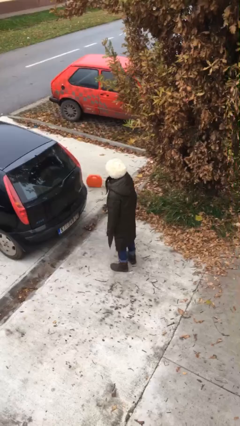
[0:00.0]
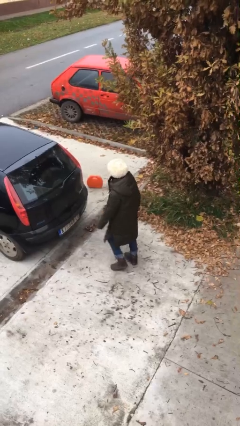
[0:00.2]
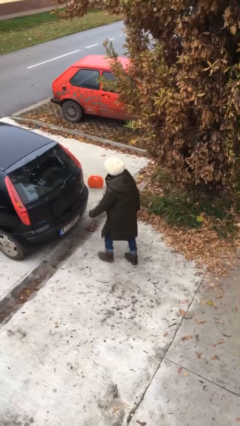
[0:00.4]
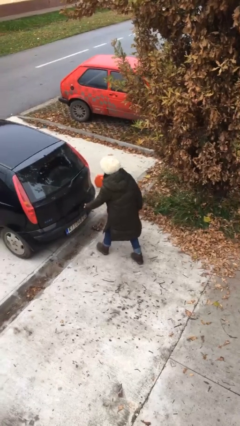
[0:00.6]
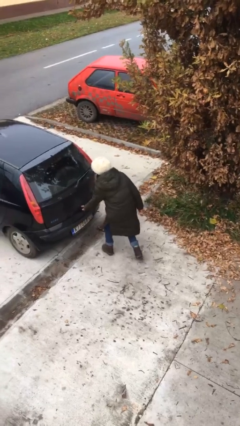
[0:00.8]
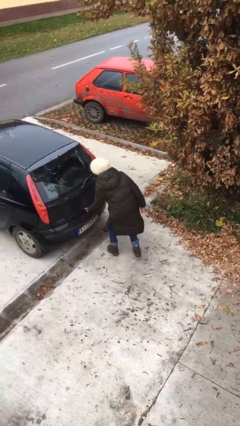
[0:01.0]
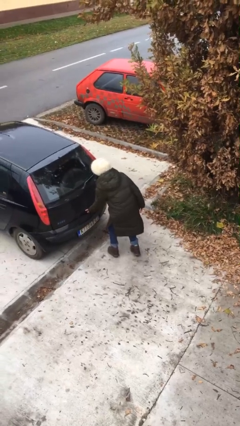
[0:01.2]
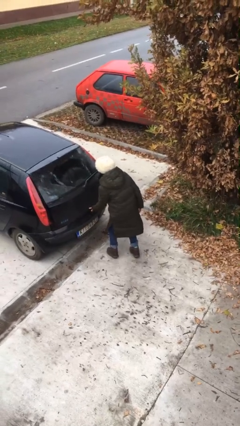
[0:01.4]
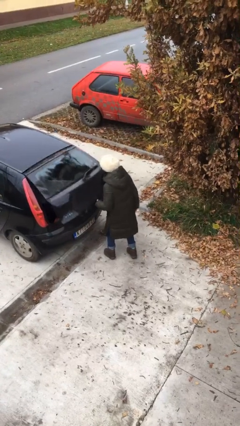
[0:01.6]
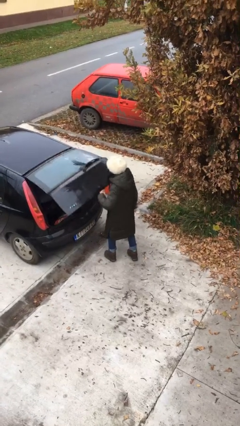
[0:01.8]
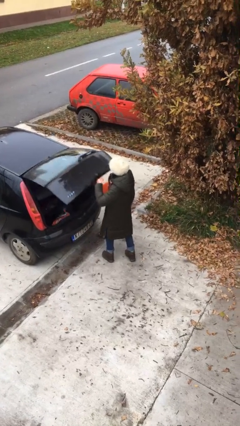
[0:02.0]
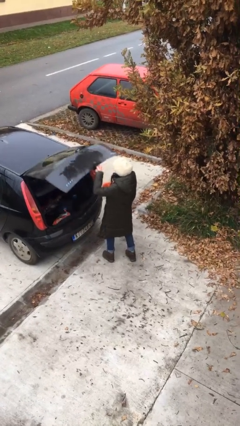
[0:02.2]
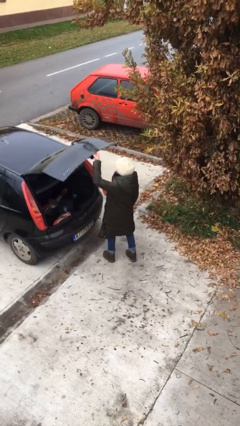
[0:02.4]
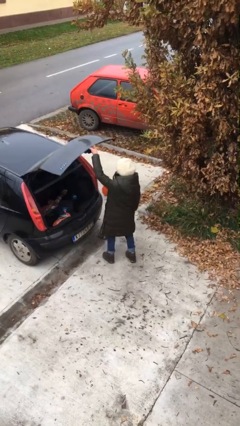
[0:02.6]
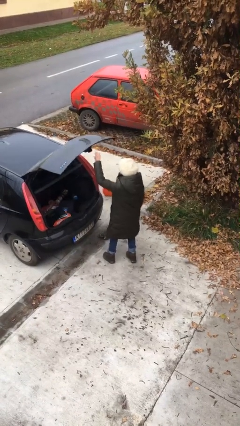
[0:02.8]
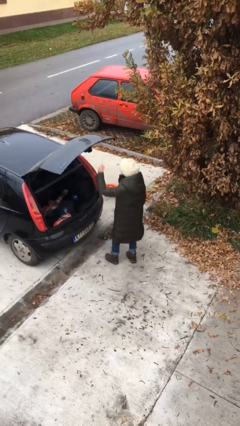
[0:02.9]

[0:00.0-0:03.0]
person opens car trunk

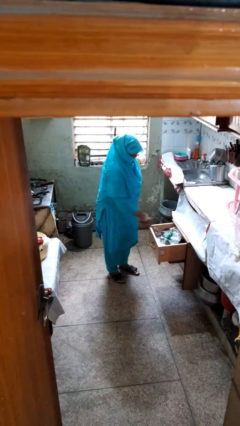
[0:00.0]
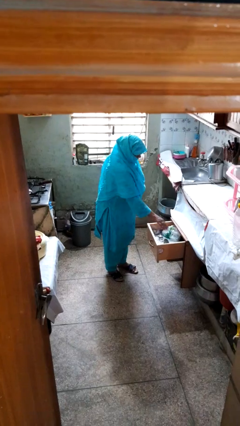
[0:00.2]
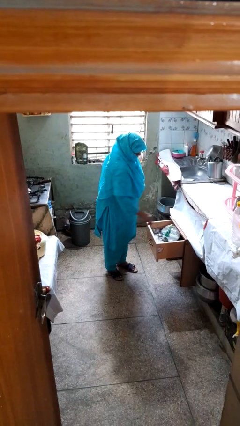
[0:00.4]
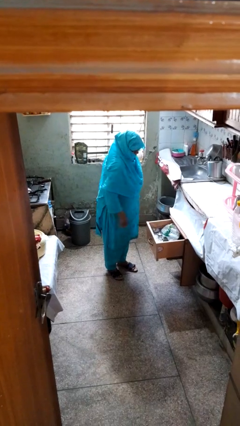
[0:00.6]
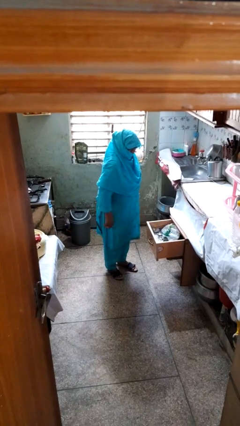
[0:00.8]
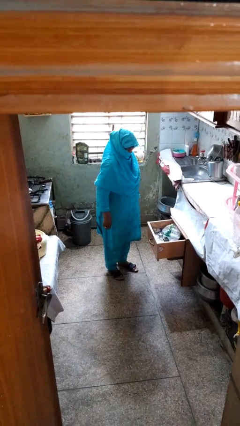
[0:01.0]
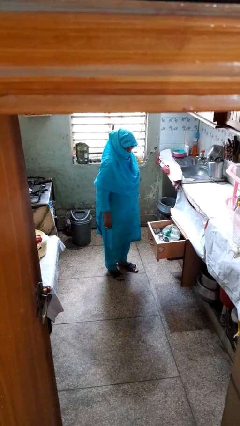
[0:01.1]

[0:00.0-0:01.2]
person puts object into kitchen drawer

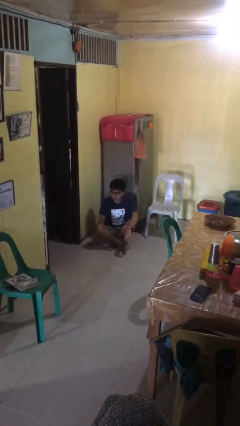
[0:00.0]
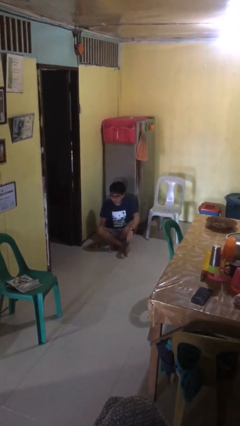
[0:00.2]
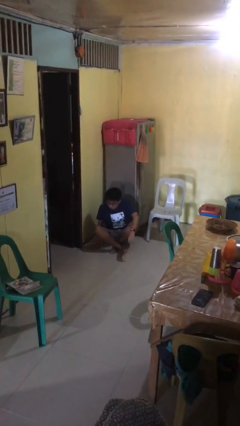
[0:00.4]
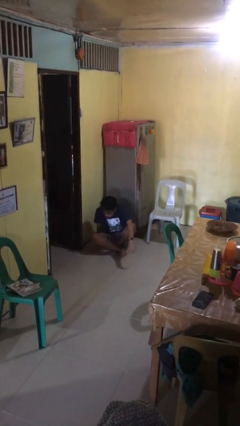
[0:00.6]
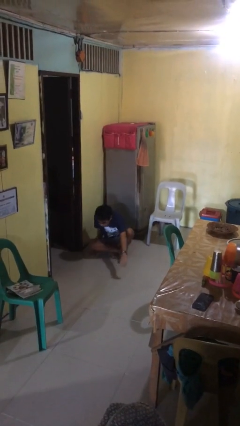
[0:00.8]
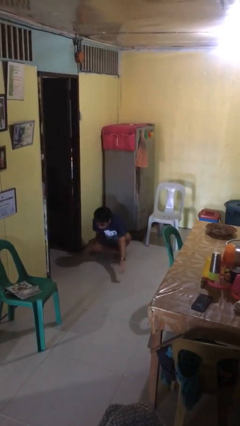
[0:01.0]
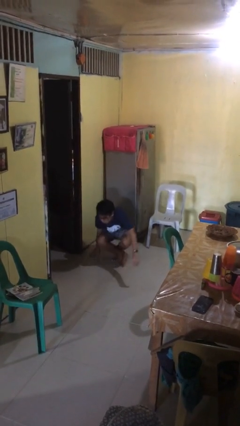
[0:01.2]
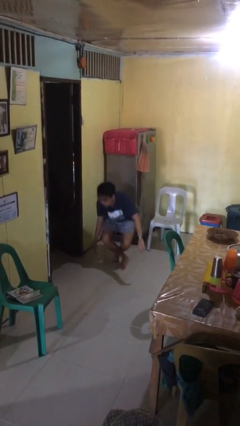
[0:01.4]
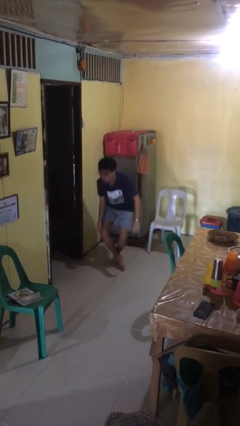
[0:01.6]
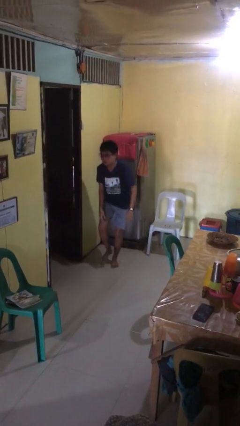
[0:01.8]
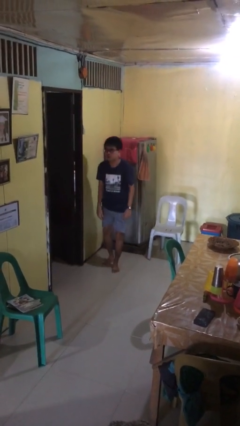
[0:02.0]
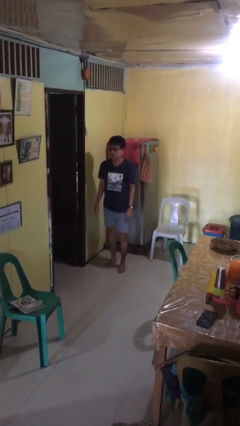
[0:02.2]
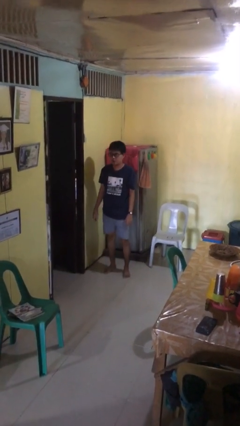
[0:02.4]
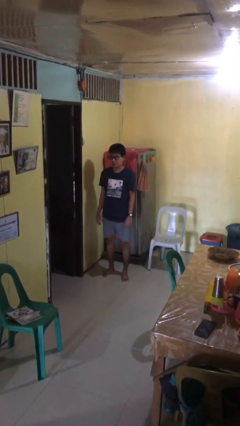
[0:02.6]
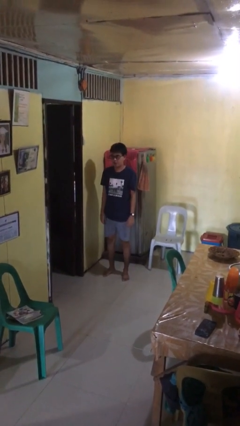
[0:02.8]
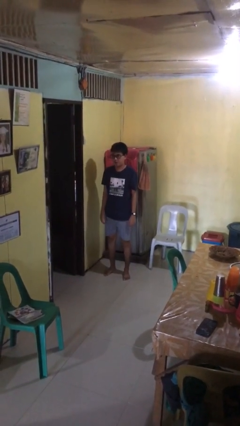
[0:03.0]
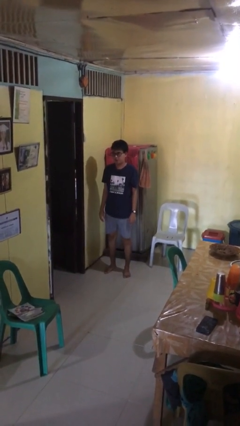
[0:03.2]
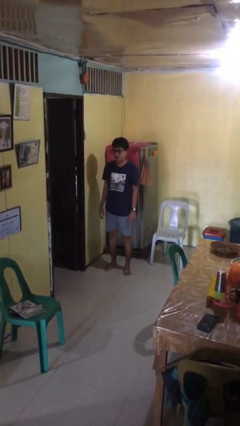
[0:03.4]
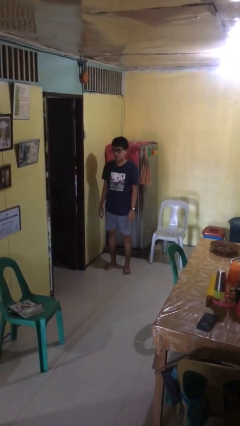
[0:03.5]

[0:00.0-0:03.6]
person stands up from floor

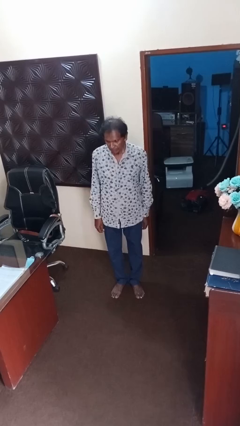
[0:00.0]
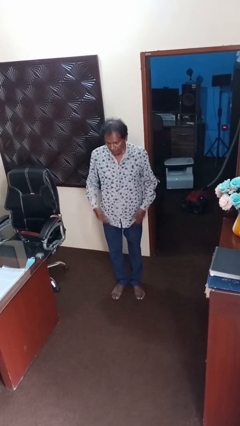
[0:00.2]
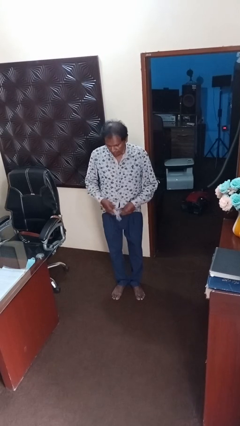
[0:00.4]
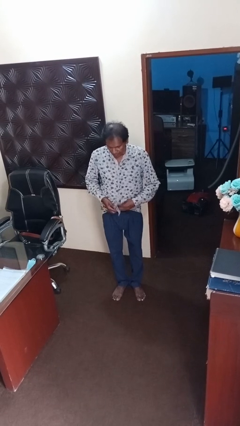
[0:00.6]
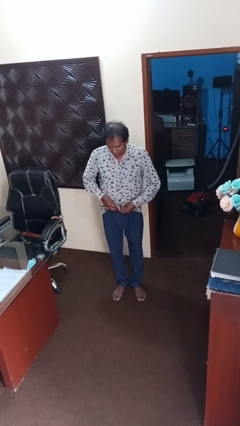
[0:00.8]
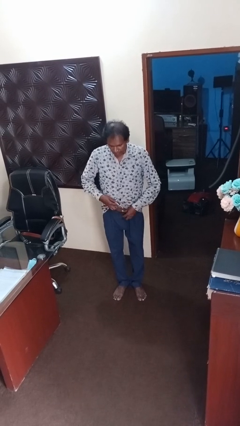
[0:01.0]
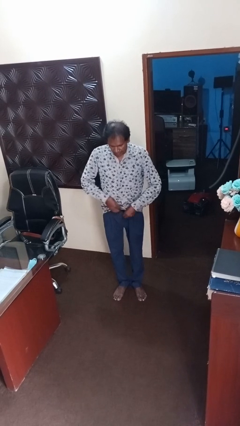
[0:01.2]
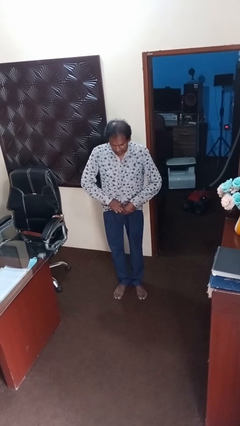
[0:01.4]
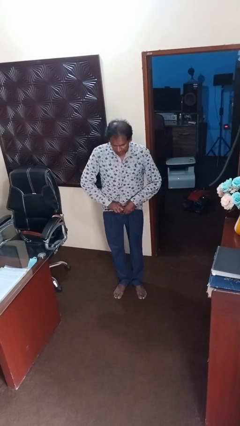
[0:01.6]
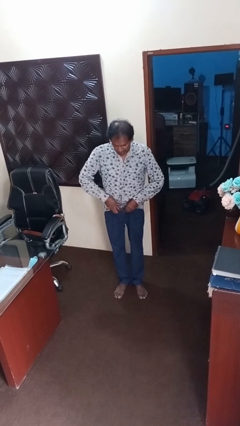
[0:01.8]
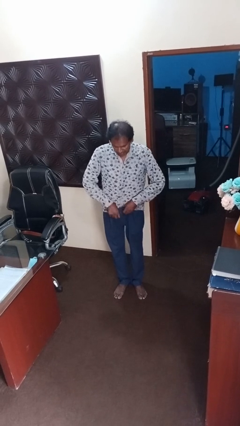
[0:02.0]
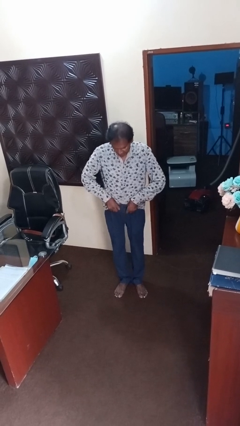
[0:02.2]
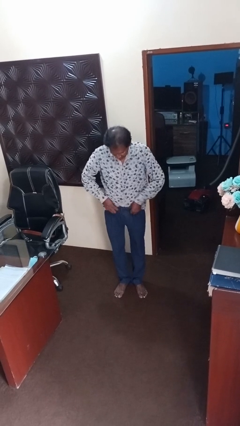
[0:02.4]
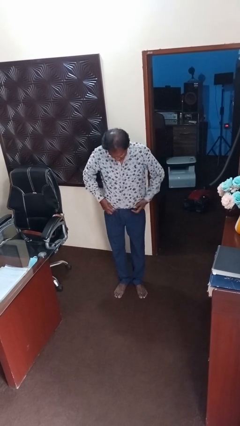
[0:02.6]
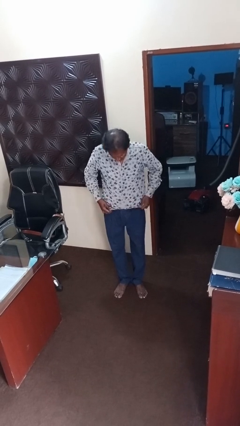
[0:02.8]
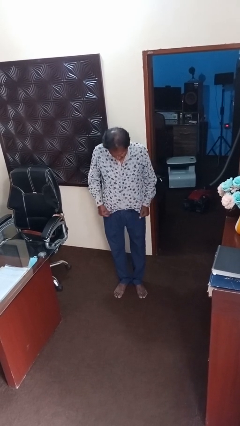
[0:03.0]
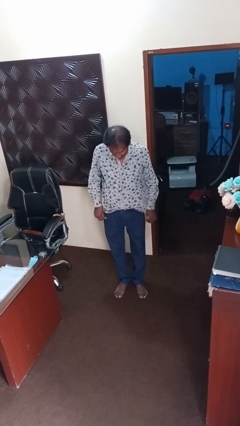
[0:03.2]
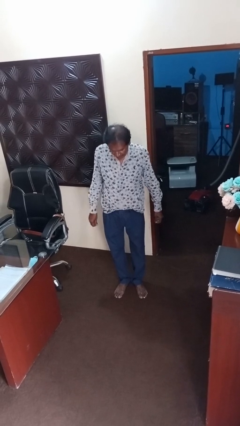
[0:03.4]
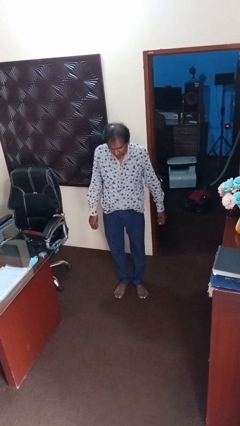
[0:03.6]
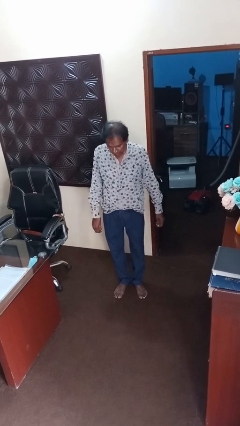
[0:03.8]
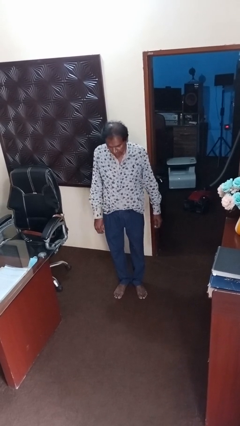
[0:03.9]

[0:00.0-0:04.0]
person tucks in shirt

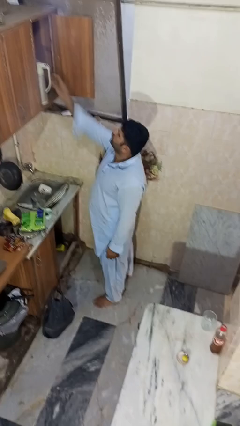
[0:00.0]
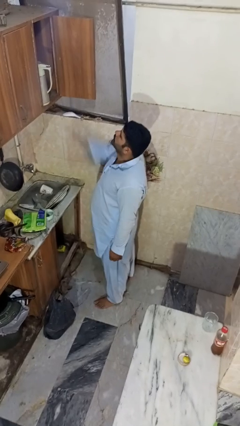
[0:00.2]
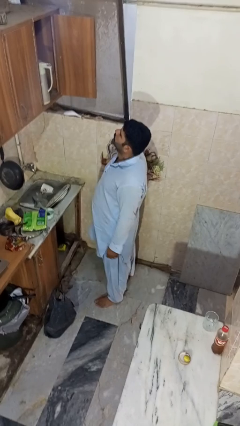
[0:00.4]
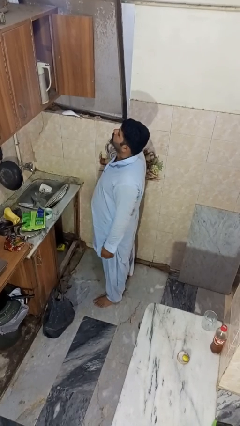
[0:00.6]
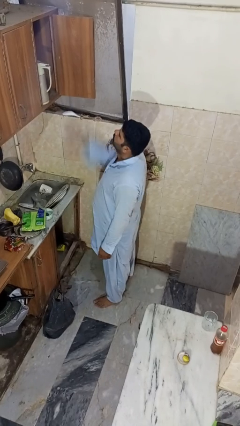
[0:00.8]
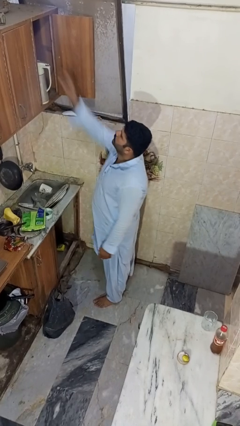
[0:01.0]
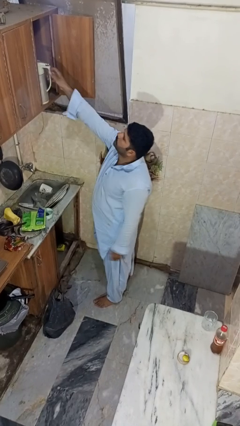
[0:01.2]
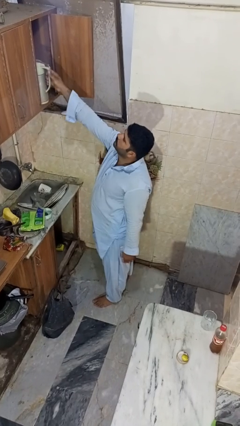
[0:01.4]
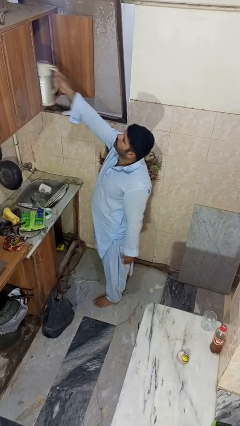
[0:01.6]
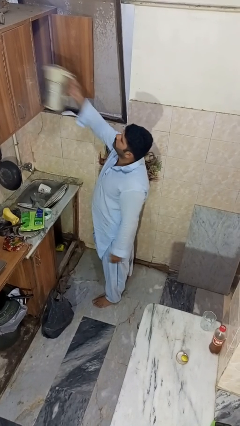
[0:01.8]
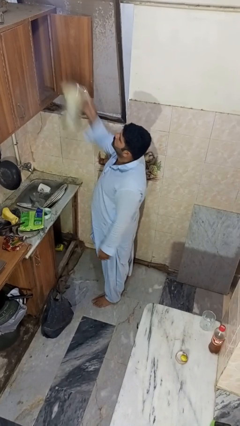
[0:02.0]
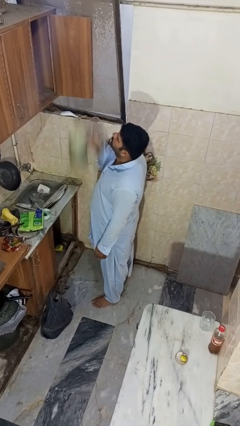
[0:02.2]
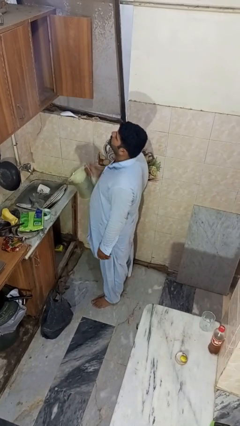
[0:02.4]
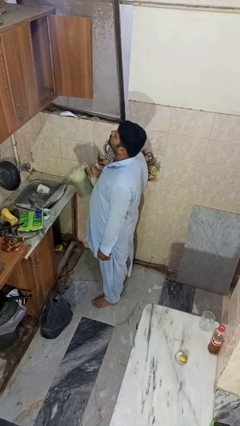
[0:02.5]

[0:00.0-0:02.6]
person takes object from cabinet

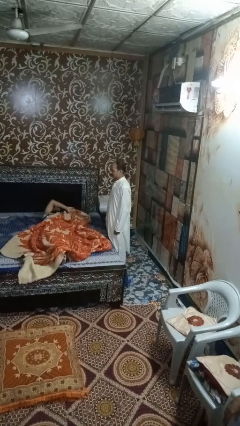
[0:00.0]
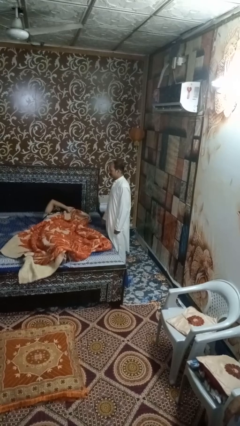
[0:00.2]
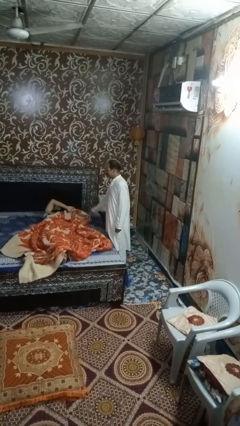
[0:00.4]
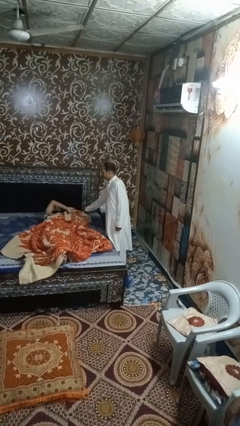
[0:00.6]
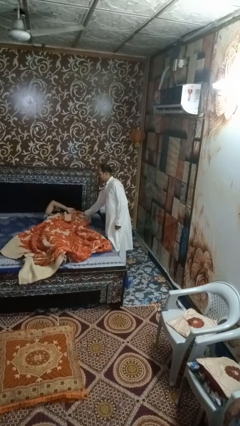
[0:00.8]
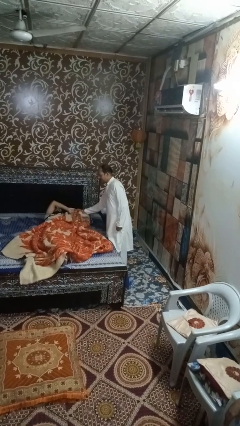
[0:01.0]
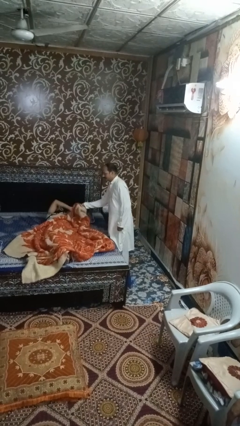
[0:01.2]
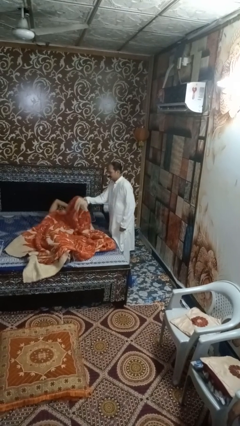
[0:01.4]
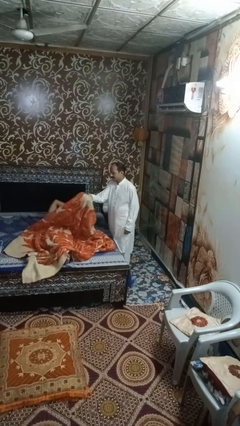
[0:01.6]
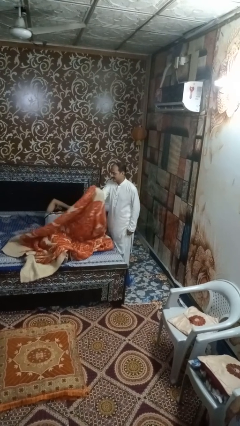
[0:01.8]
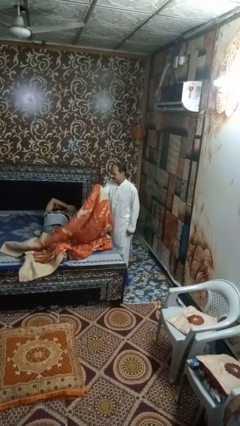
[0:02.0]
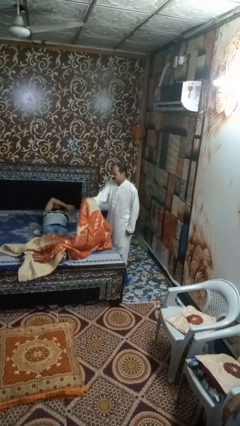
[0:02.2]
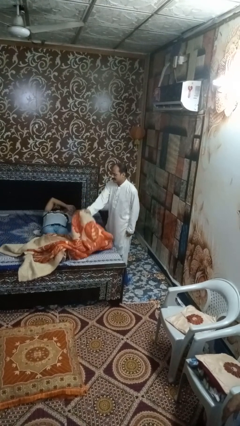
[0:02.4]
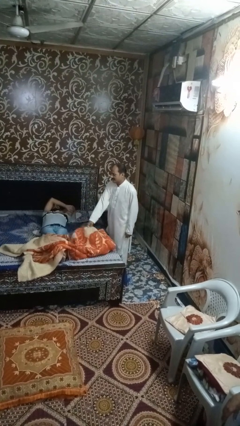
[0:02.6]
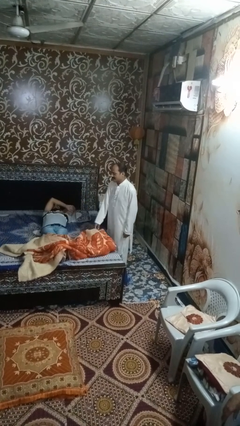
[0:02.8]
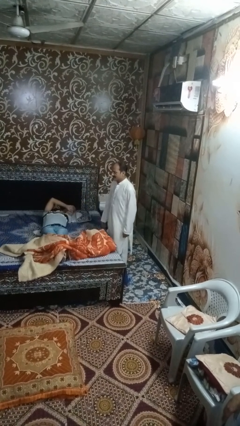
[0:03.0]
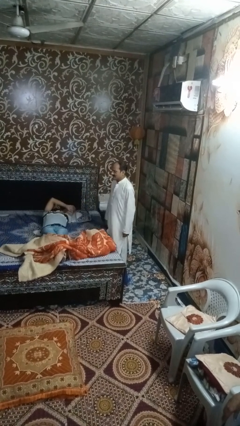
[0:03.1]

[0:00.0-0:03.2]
person uncovers friend with blanket
